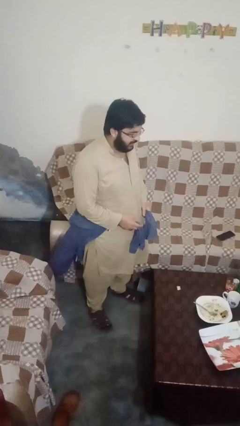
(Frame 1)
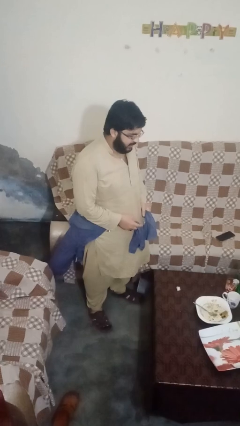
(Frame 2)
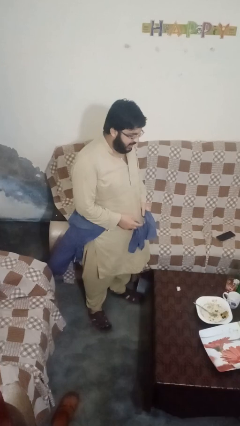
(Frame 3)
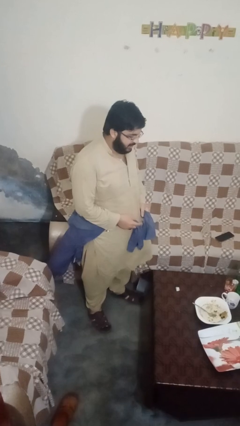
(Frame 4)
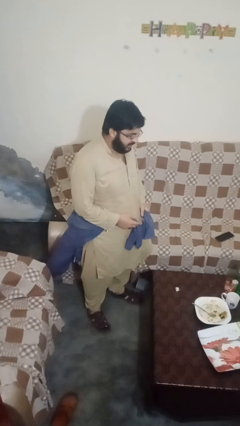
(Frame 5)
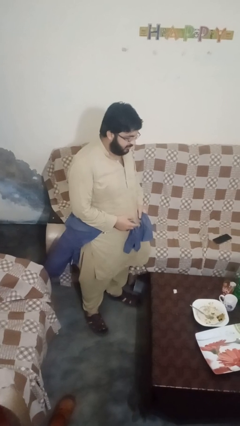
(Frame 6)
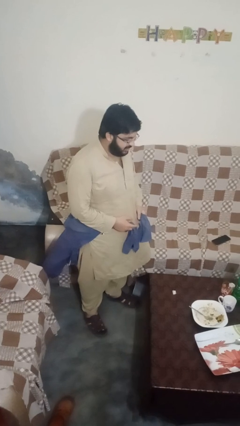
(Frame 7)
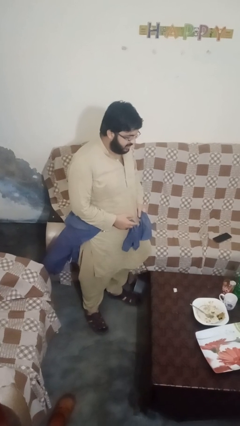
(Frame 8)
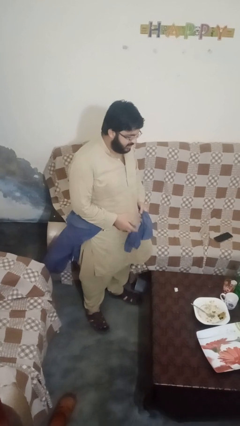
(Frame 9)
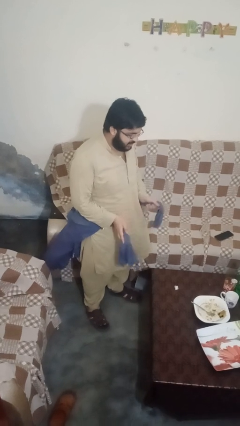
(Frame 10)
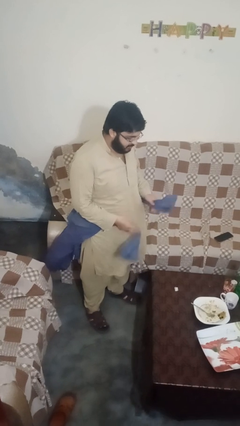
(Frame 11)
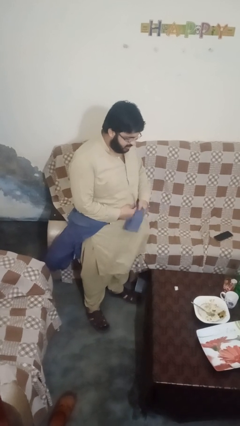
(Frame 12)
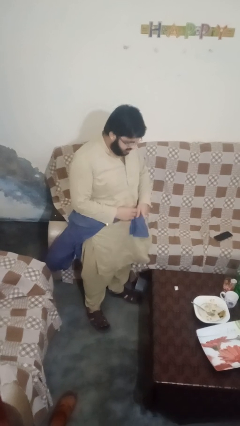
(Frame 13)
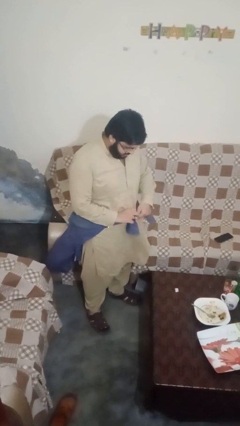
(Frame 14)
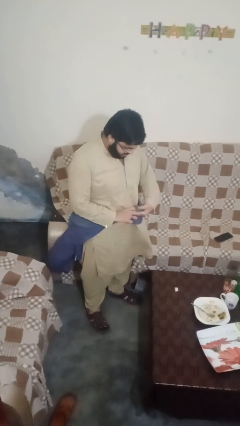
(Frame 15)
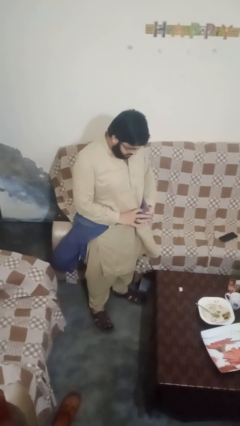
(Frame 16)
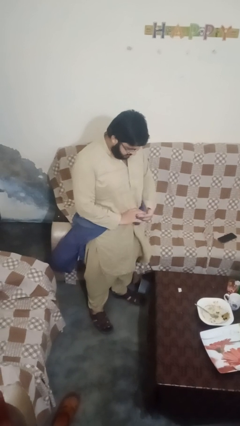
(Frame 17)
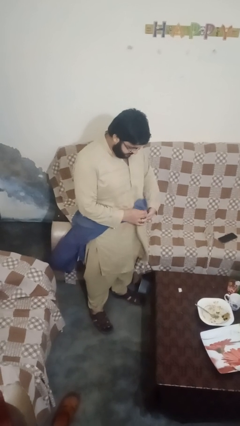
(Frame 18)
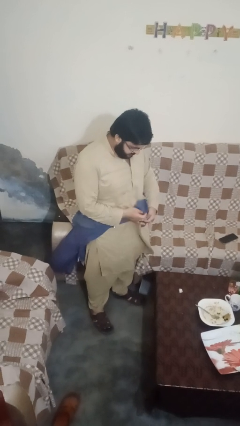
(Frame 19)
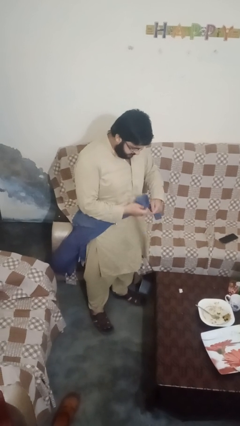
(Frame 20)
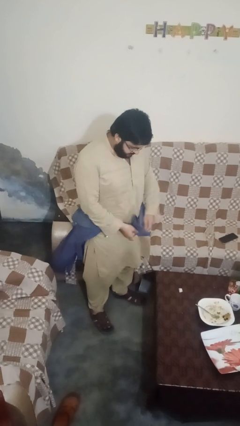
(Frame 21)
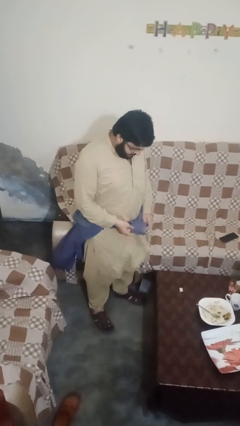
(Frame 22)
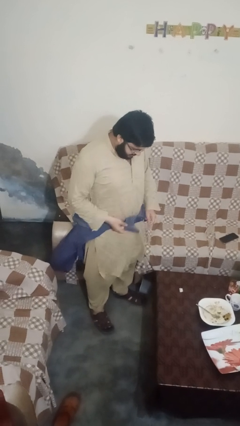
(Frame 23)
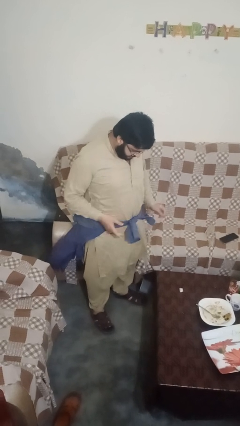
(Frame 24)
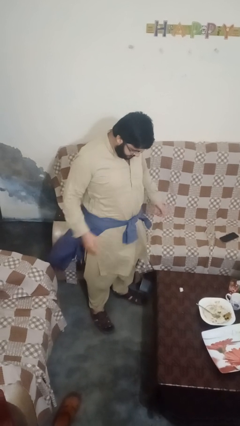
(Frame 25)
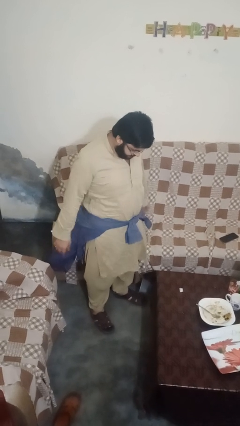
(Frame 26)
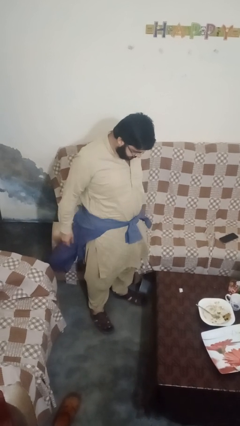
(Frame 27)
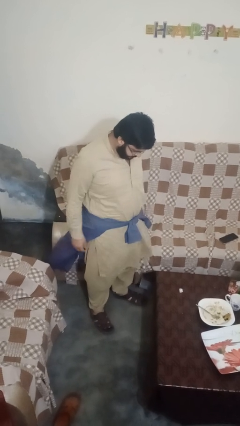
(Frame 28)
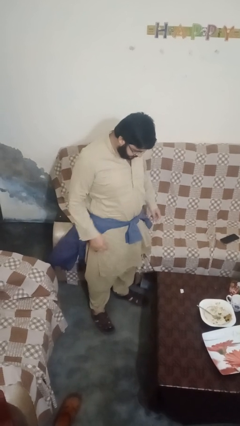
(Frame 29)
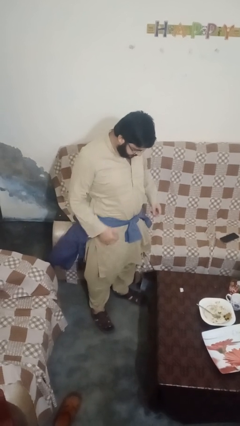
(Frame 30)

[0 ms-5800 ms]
person ties jacket around waist

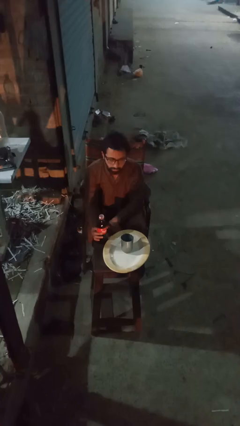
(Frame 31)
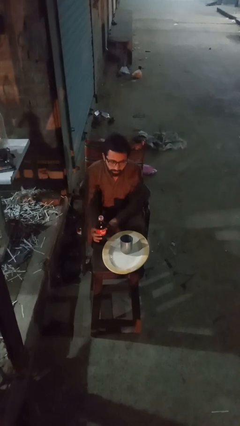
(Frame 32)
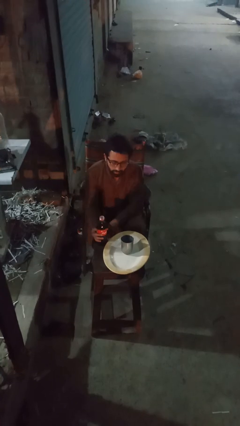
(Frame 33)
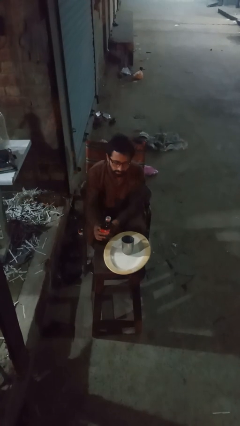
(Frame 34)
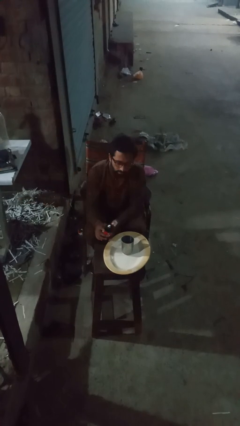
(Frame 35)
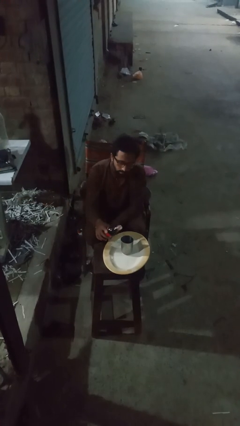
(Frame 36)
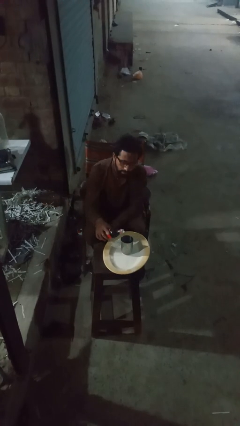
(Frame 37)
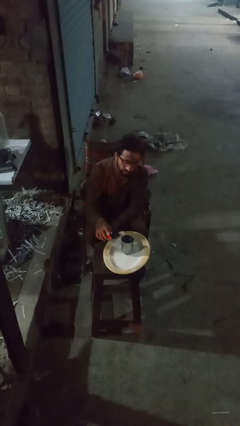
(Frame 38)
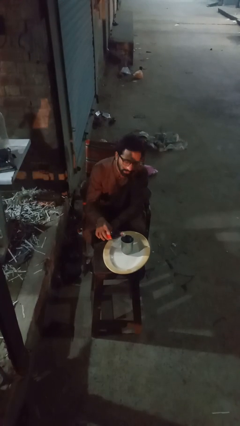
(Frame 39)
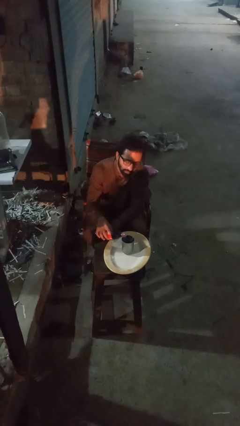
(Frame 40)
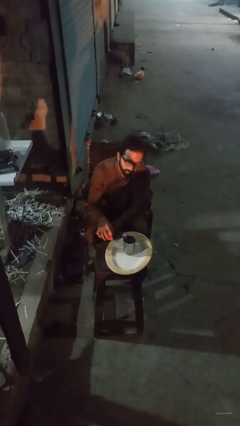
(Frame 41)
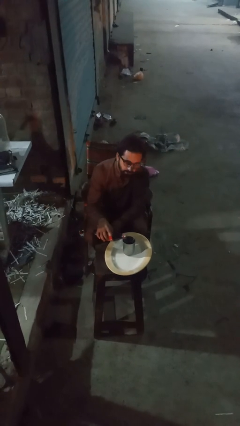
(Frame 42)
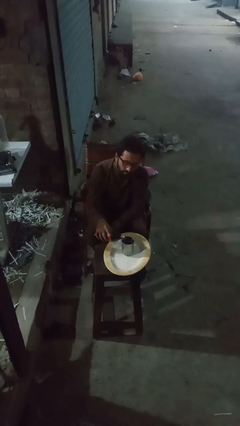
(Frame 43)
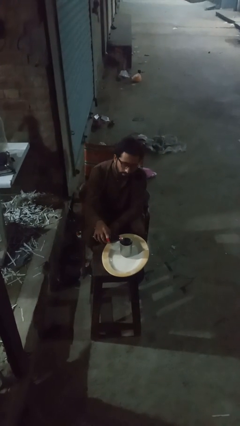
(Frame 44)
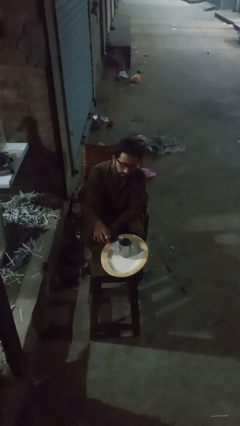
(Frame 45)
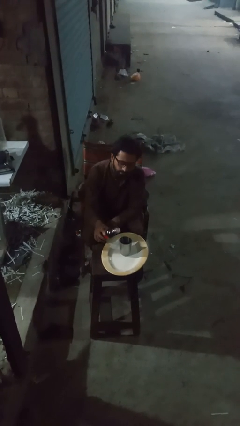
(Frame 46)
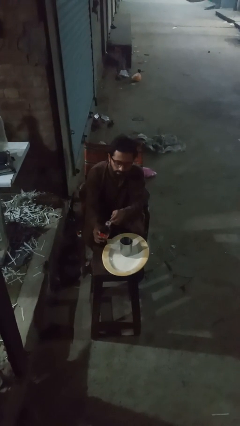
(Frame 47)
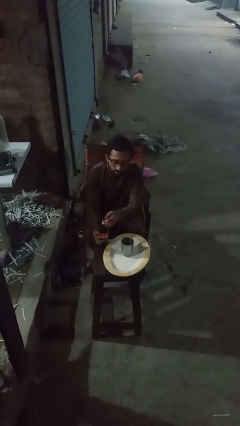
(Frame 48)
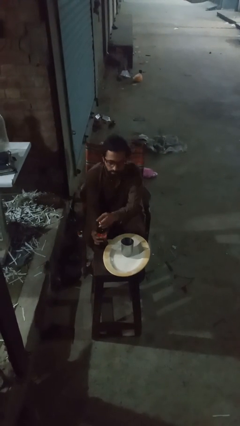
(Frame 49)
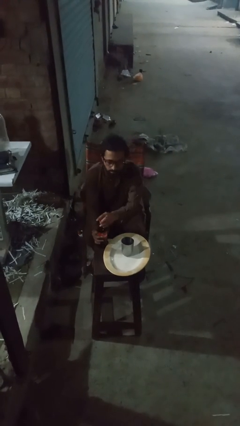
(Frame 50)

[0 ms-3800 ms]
person pours liquid into cup

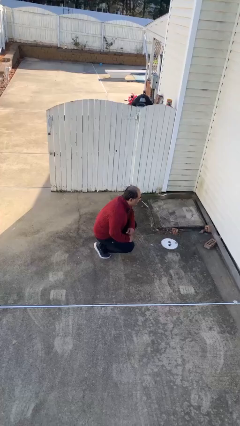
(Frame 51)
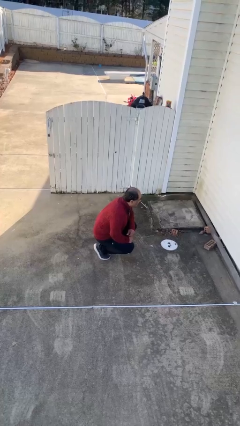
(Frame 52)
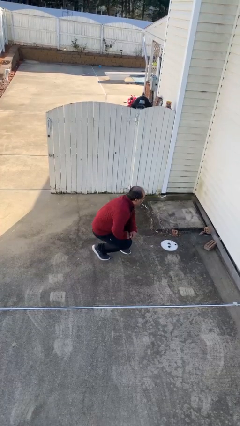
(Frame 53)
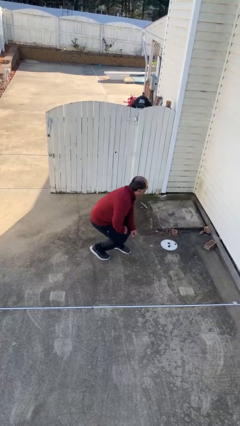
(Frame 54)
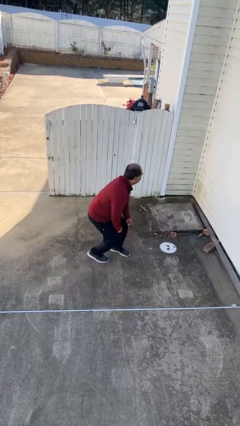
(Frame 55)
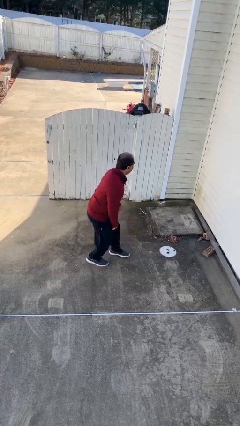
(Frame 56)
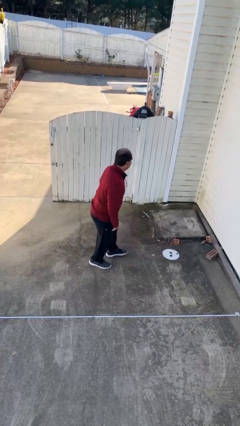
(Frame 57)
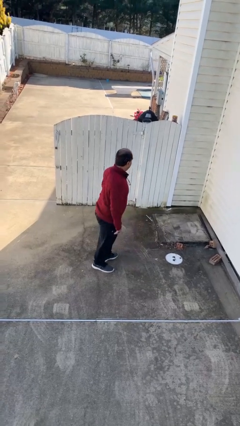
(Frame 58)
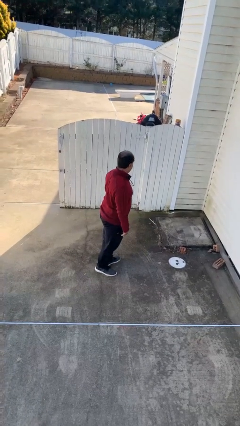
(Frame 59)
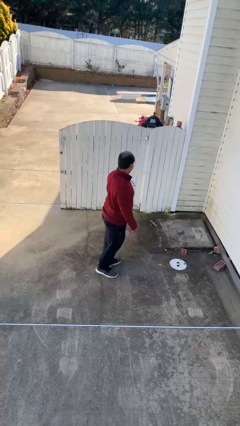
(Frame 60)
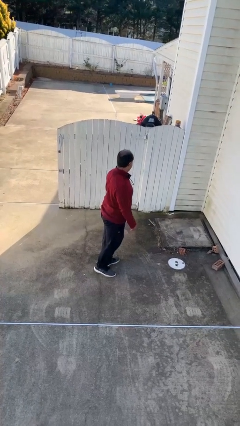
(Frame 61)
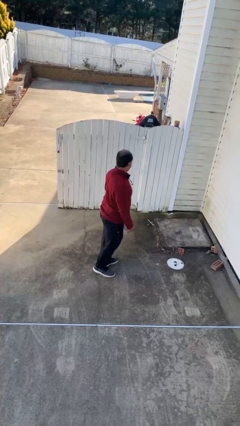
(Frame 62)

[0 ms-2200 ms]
person stands up

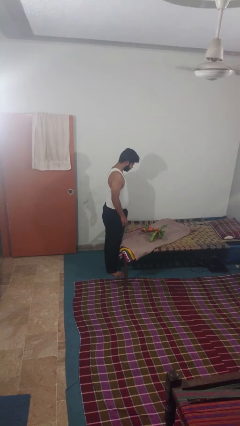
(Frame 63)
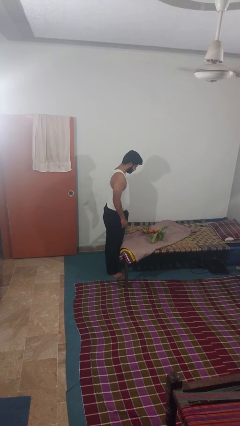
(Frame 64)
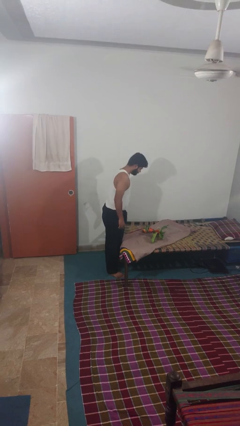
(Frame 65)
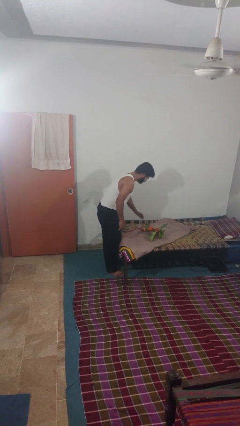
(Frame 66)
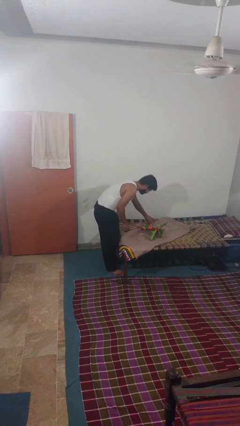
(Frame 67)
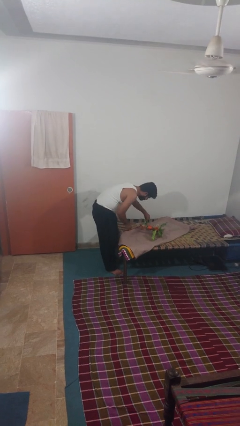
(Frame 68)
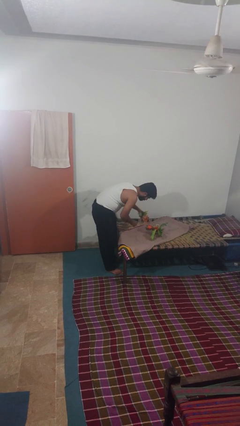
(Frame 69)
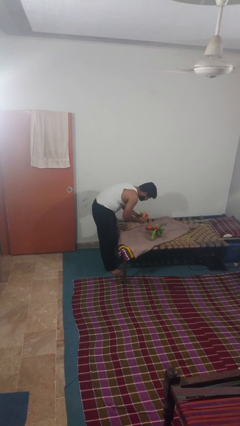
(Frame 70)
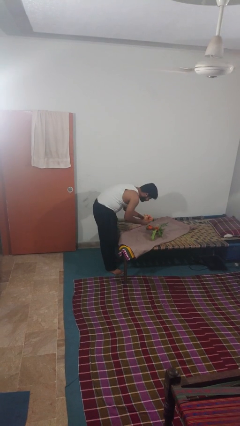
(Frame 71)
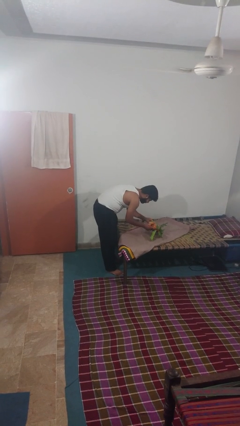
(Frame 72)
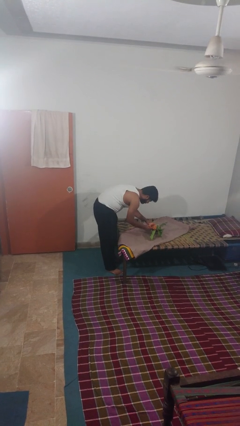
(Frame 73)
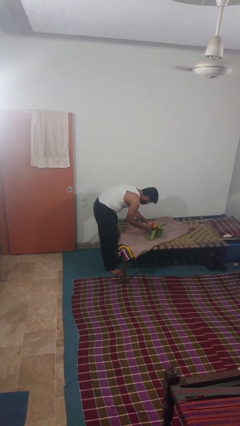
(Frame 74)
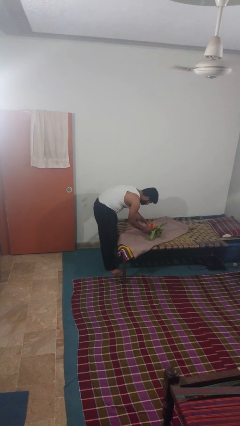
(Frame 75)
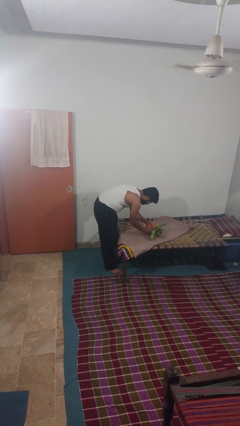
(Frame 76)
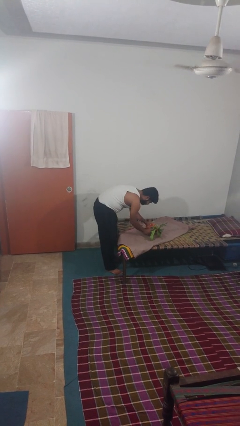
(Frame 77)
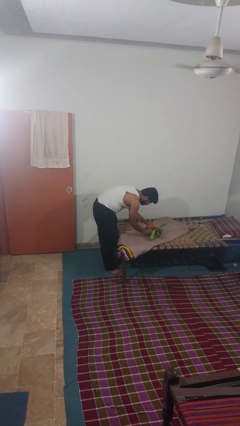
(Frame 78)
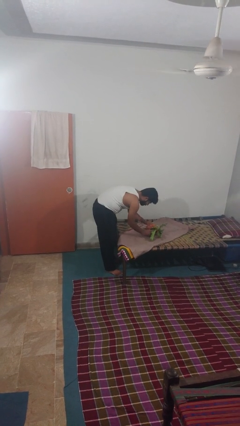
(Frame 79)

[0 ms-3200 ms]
person arranges flowers in vase

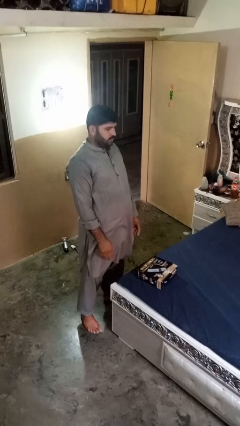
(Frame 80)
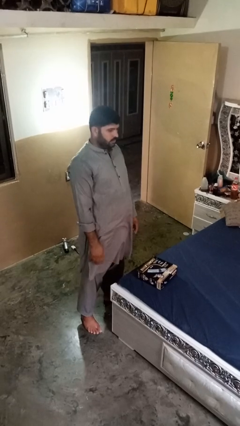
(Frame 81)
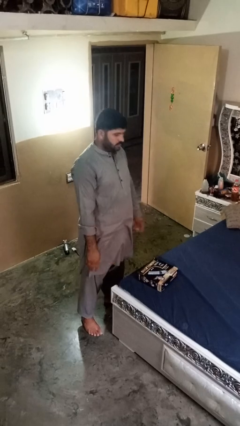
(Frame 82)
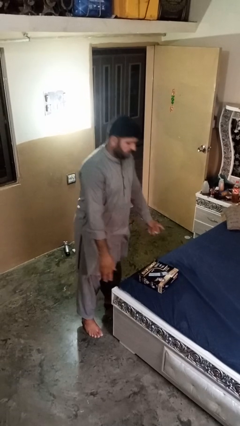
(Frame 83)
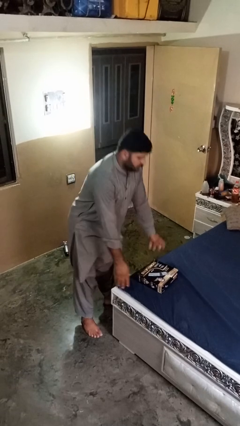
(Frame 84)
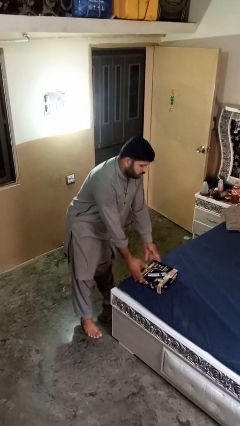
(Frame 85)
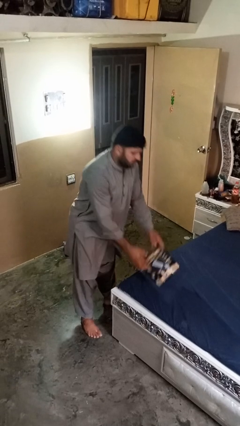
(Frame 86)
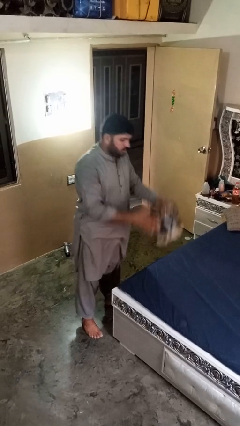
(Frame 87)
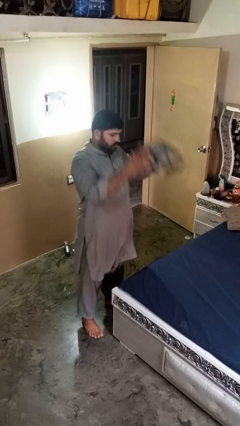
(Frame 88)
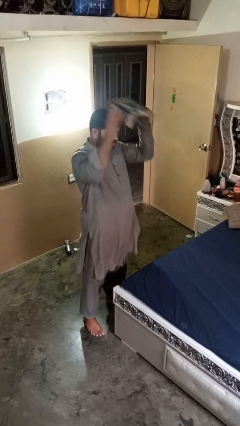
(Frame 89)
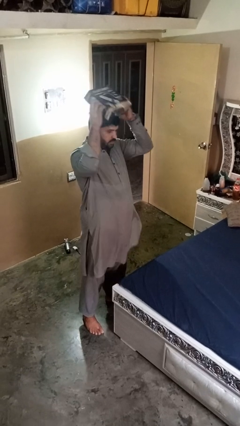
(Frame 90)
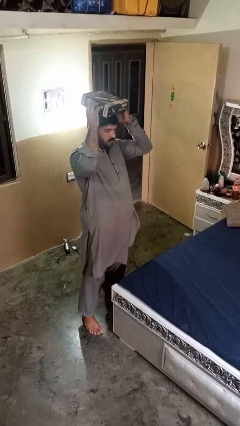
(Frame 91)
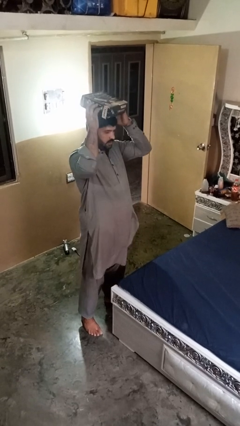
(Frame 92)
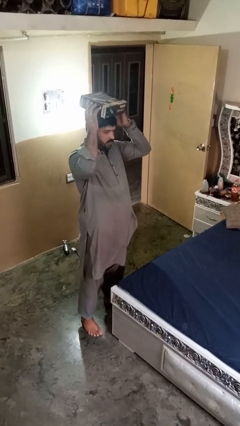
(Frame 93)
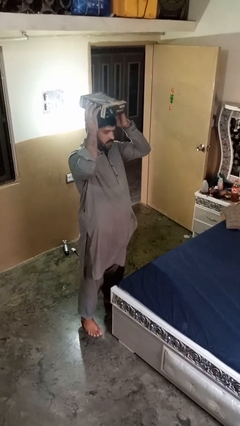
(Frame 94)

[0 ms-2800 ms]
person holds object above head
